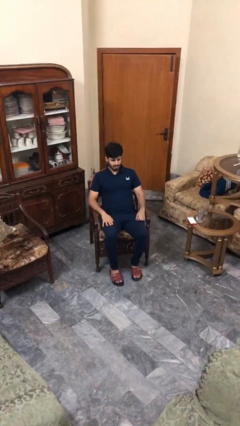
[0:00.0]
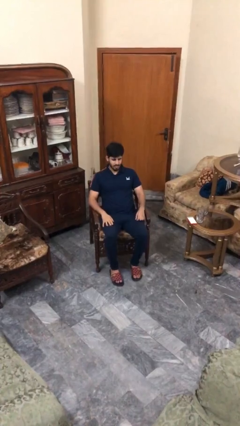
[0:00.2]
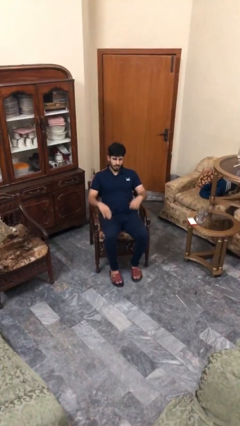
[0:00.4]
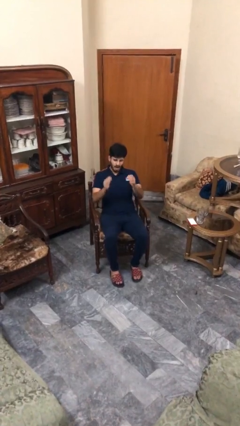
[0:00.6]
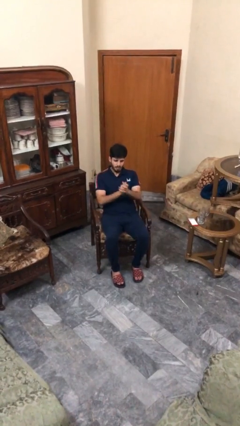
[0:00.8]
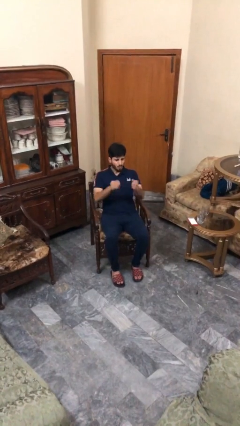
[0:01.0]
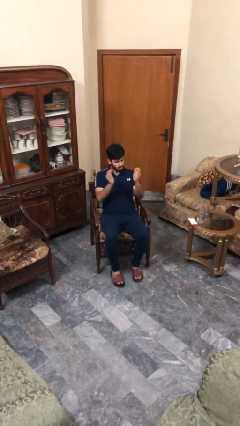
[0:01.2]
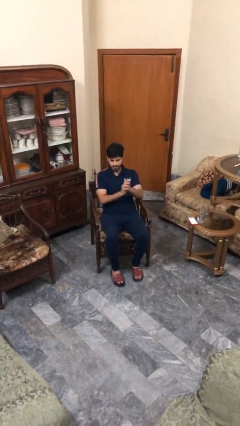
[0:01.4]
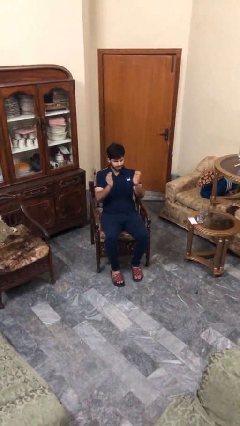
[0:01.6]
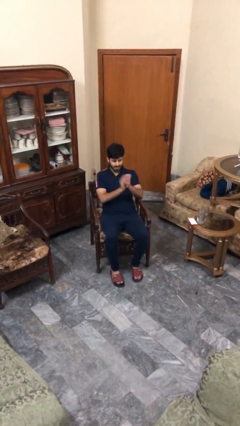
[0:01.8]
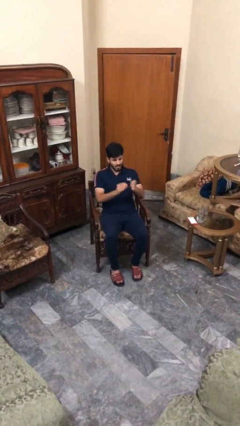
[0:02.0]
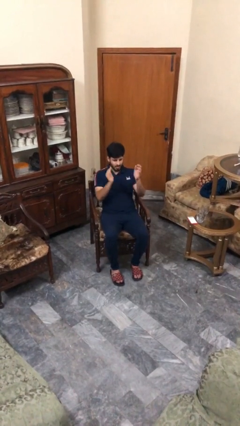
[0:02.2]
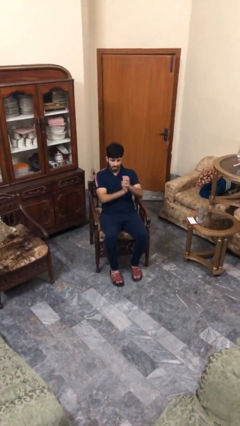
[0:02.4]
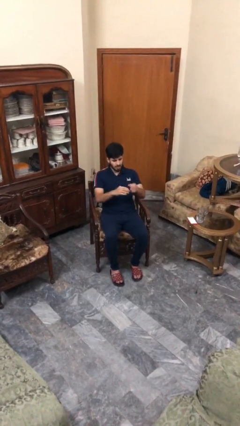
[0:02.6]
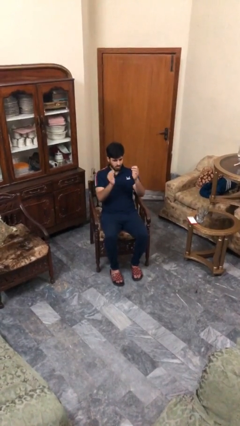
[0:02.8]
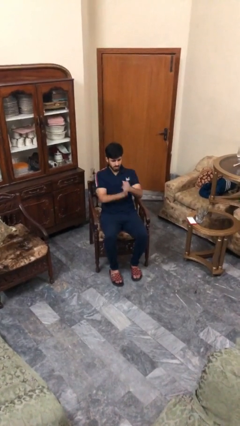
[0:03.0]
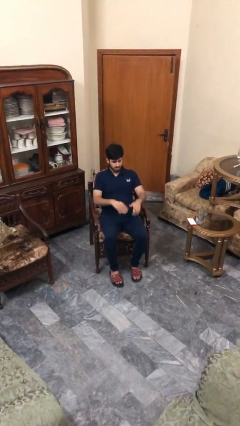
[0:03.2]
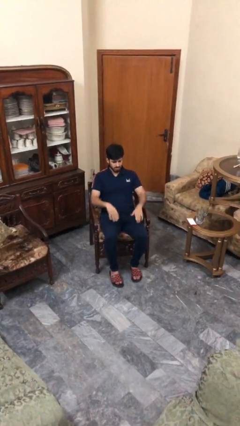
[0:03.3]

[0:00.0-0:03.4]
person claps hands

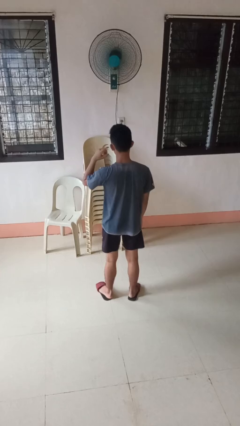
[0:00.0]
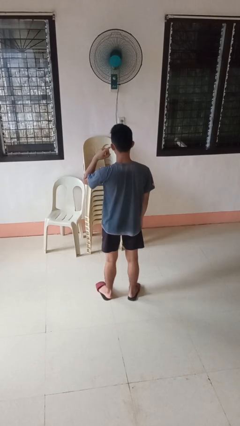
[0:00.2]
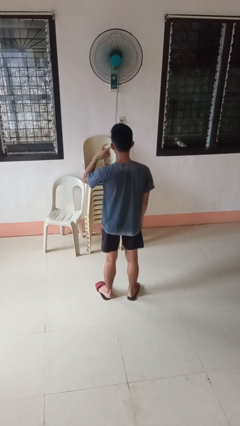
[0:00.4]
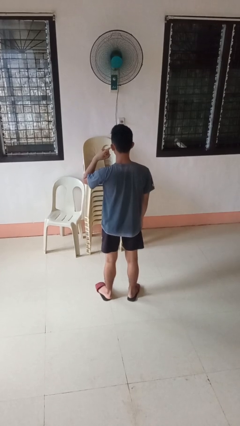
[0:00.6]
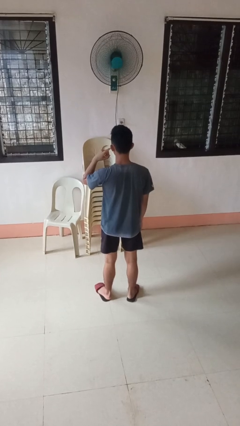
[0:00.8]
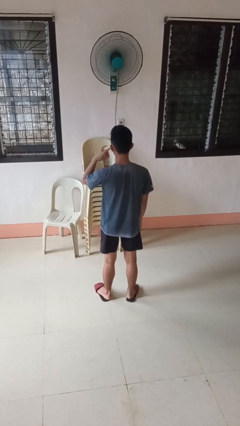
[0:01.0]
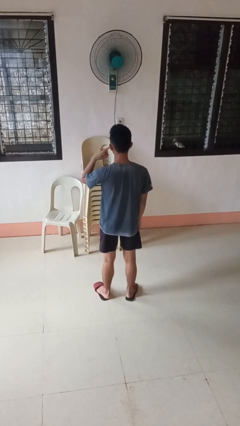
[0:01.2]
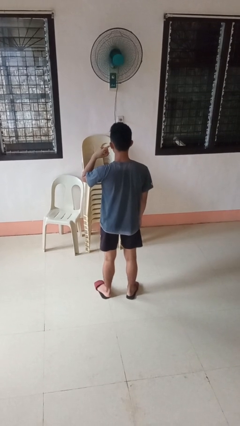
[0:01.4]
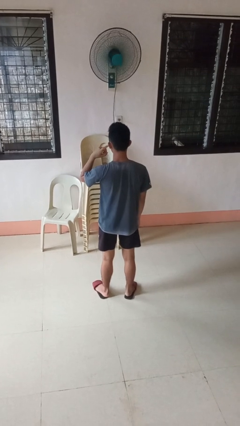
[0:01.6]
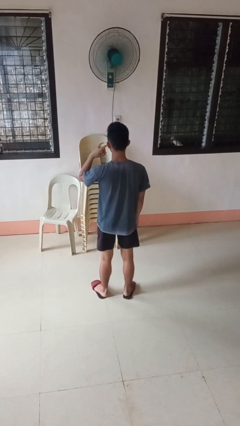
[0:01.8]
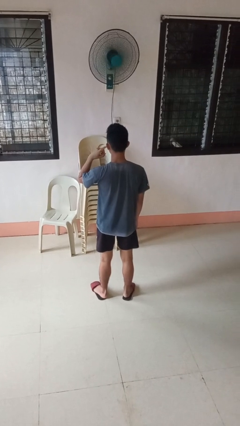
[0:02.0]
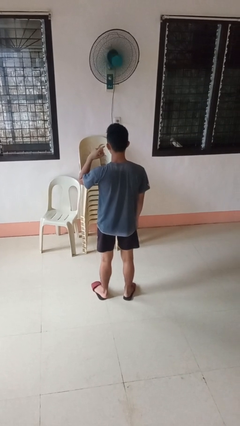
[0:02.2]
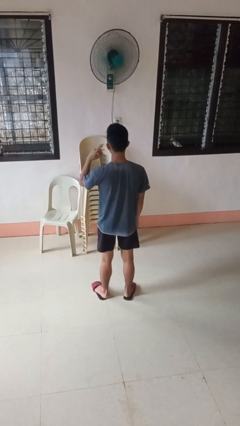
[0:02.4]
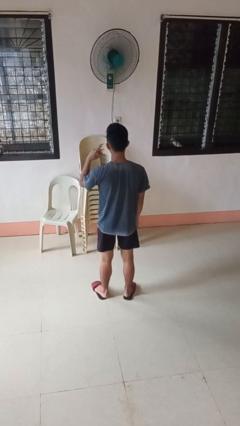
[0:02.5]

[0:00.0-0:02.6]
person gestures listen closely

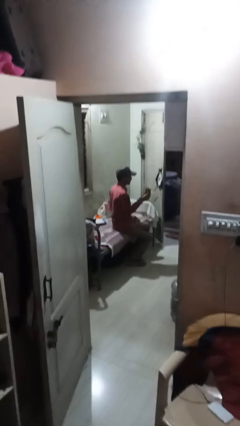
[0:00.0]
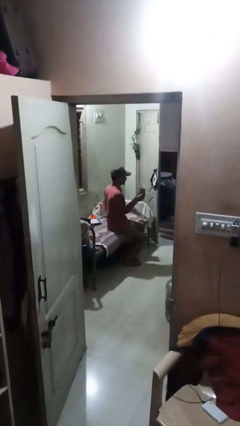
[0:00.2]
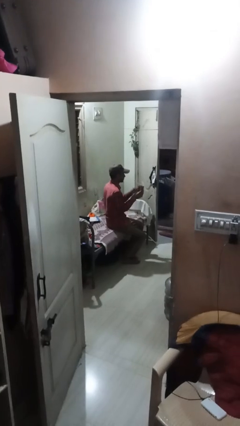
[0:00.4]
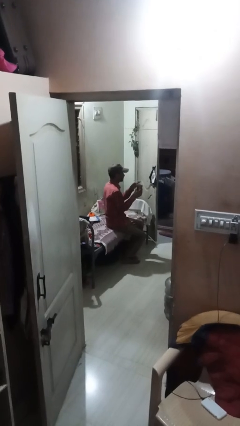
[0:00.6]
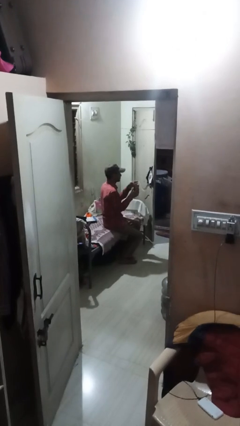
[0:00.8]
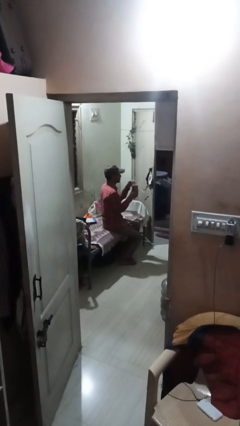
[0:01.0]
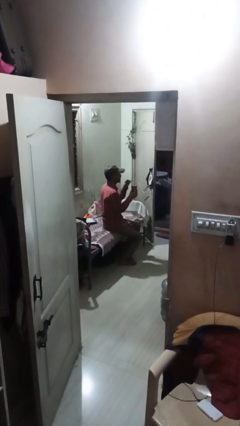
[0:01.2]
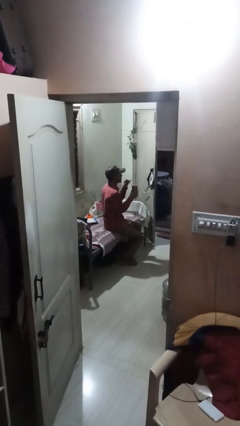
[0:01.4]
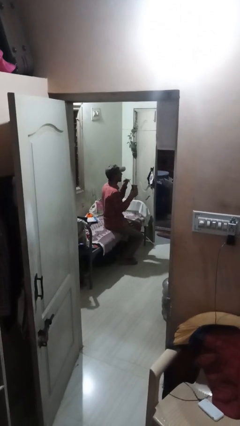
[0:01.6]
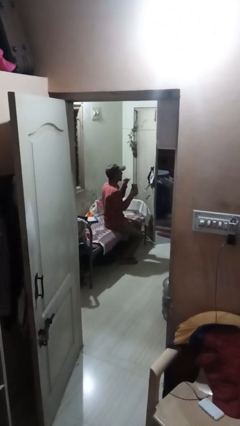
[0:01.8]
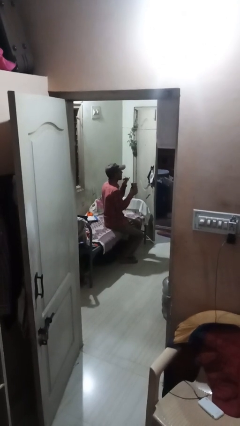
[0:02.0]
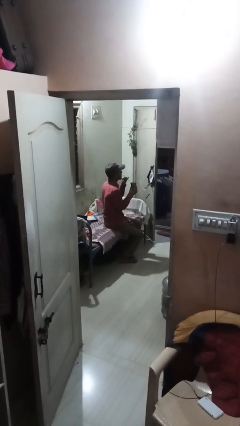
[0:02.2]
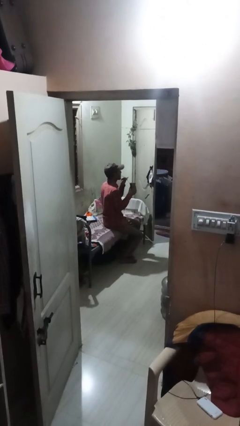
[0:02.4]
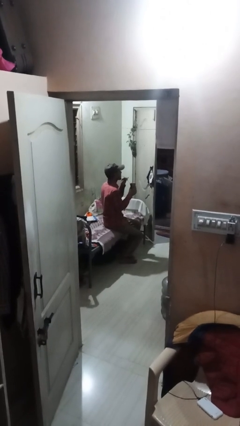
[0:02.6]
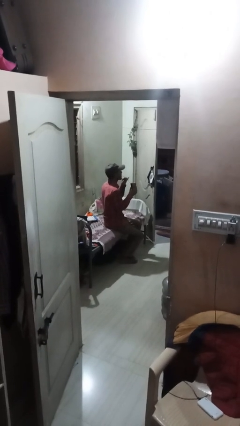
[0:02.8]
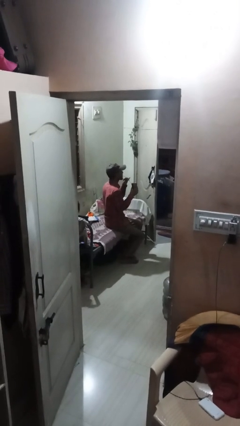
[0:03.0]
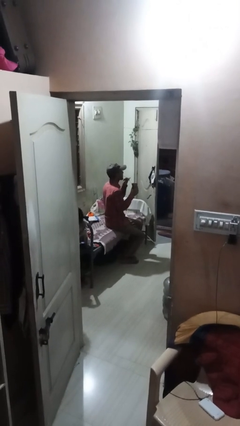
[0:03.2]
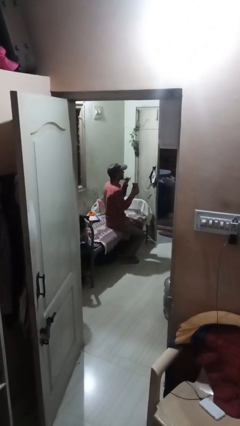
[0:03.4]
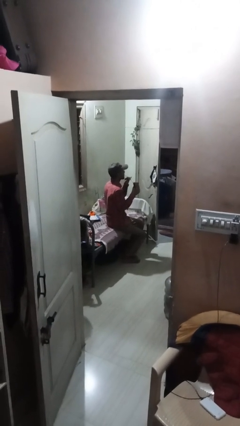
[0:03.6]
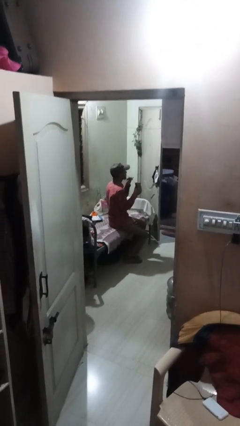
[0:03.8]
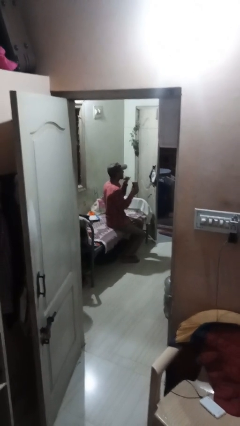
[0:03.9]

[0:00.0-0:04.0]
person drinks from straw

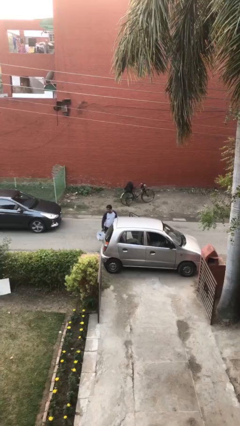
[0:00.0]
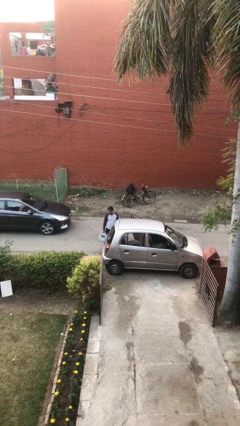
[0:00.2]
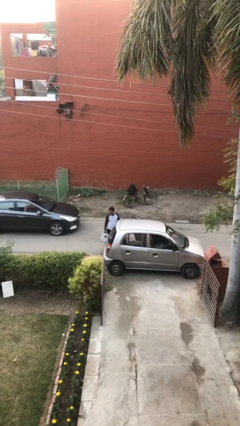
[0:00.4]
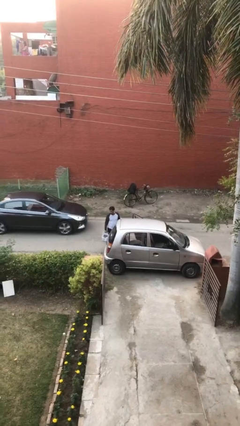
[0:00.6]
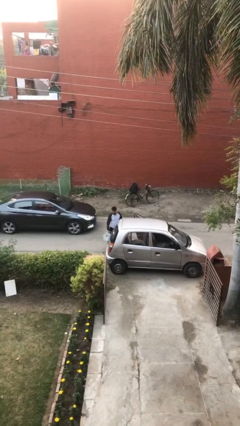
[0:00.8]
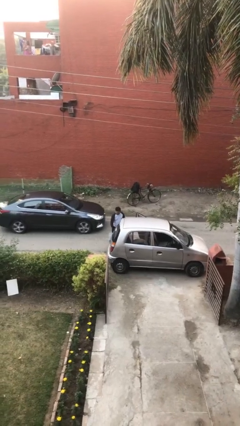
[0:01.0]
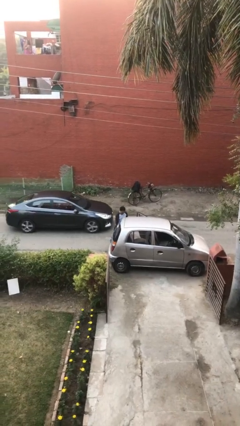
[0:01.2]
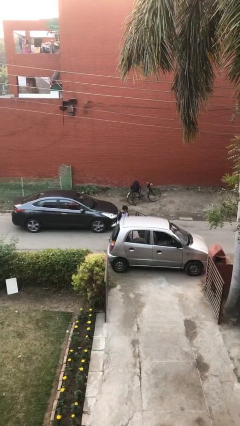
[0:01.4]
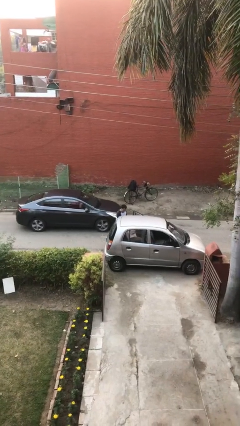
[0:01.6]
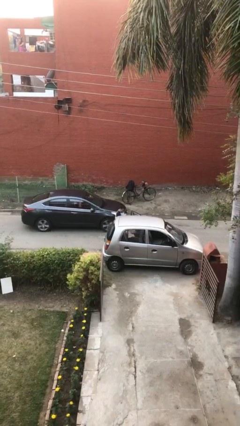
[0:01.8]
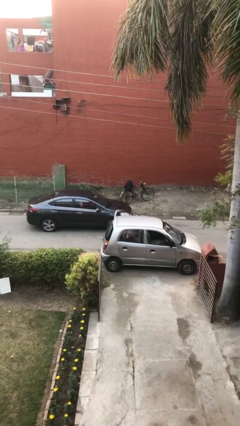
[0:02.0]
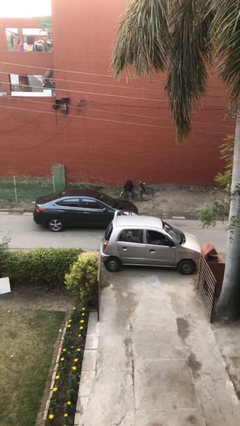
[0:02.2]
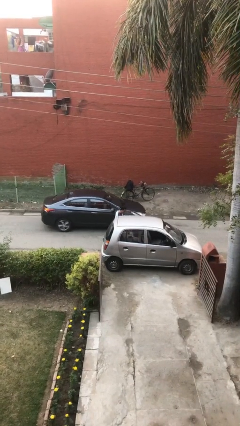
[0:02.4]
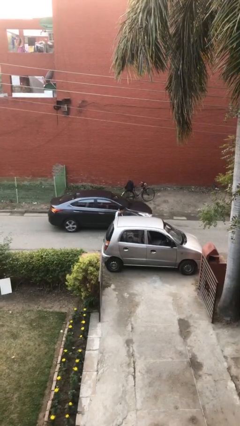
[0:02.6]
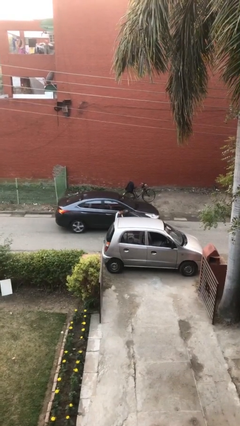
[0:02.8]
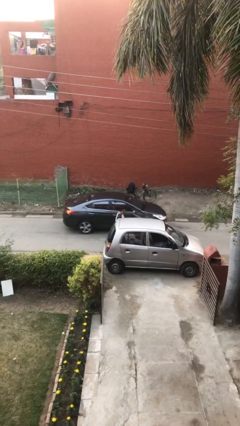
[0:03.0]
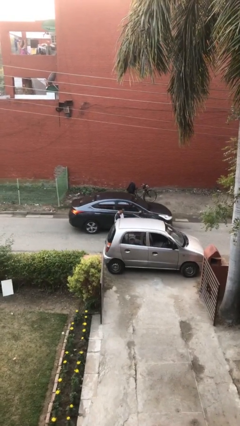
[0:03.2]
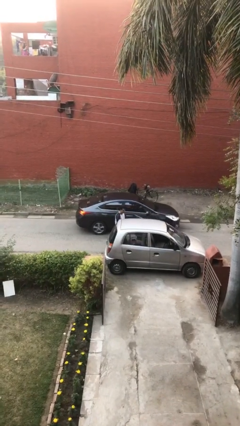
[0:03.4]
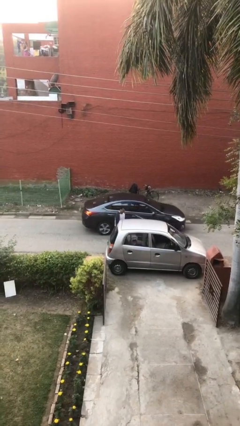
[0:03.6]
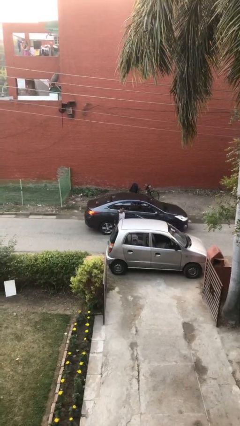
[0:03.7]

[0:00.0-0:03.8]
person loads car

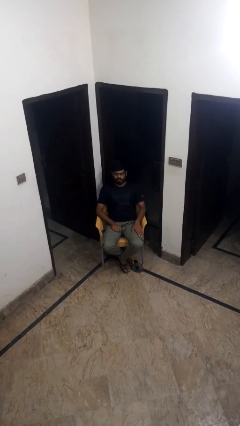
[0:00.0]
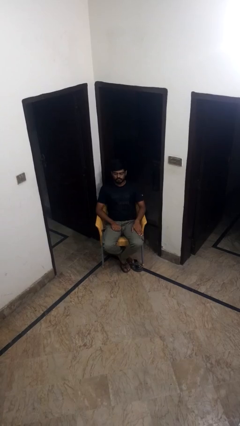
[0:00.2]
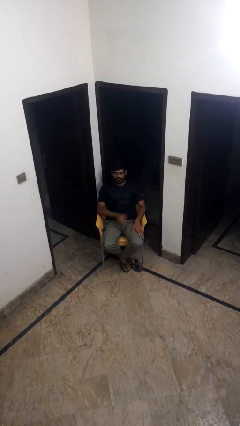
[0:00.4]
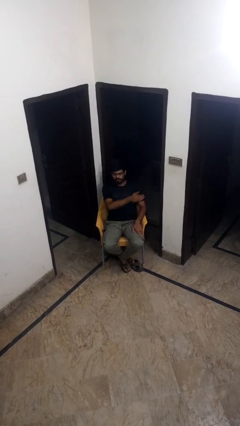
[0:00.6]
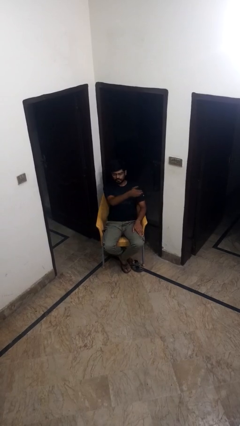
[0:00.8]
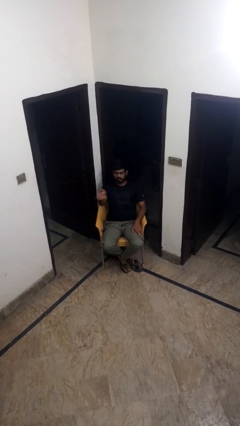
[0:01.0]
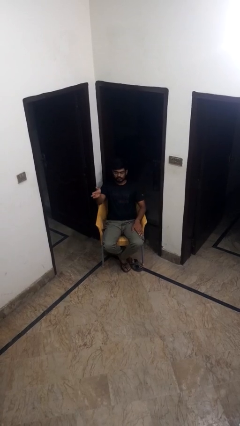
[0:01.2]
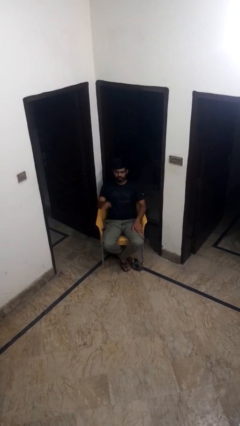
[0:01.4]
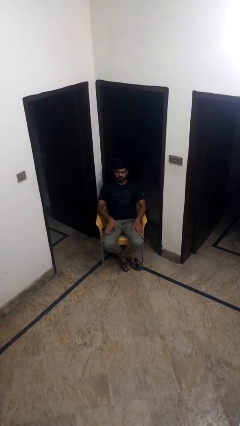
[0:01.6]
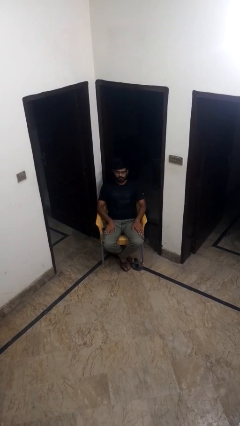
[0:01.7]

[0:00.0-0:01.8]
person gestures swipe right

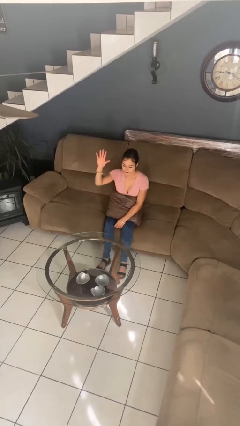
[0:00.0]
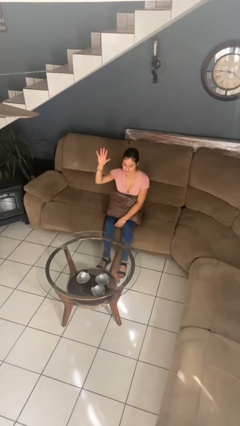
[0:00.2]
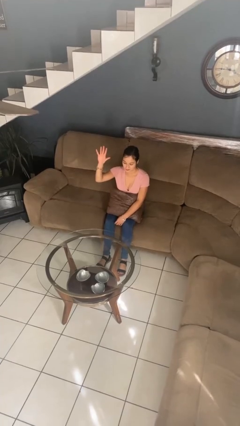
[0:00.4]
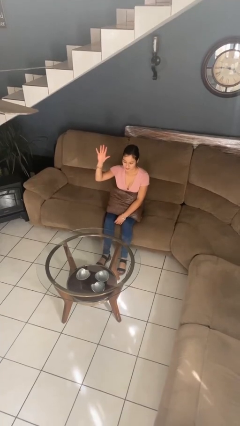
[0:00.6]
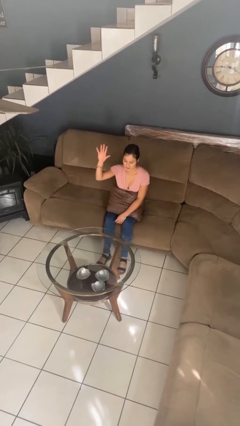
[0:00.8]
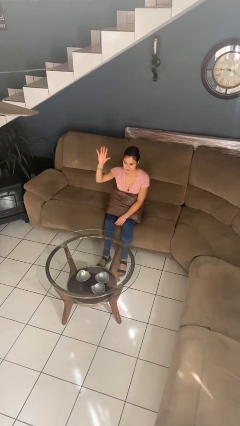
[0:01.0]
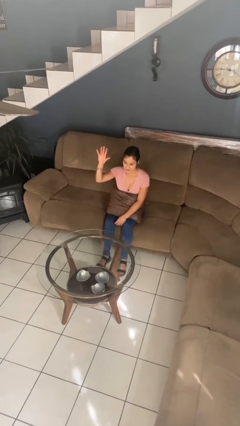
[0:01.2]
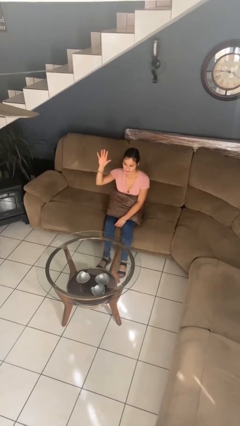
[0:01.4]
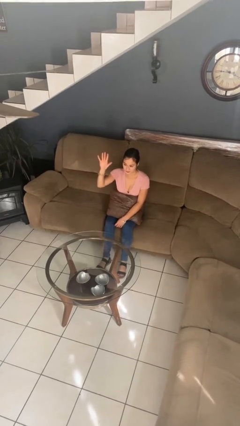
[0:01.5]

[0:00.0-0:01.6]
person gestures number five

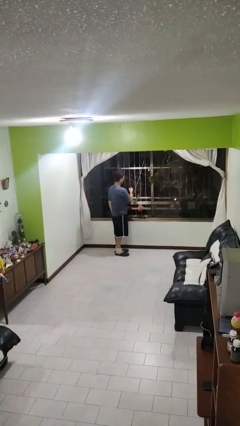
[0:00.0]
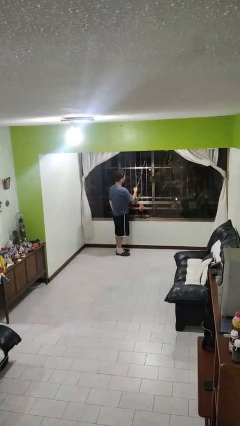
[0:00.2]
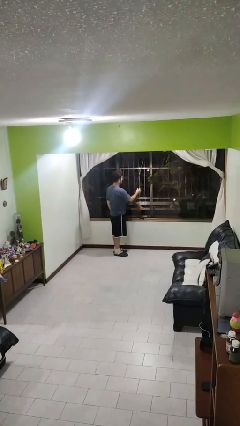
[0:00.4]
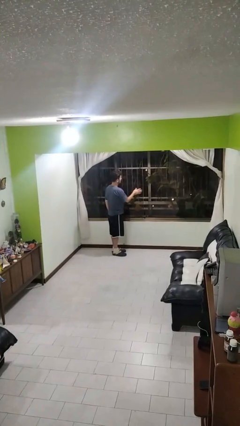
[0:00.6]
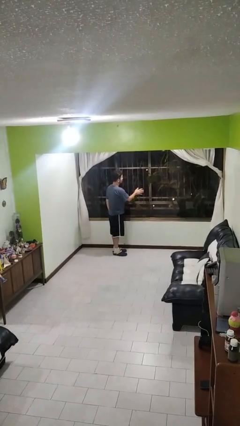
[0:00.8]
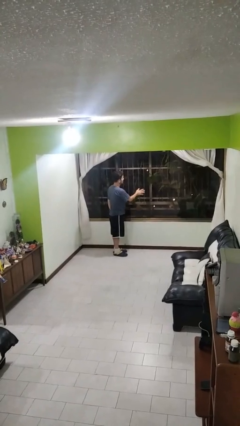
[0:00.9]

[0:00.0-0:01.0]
person closes home window
